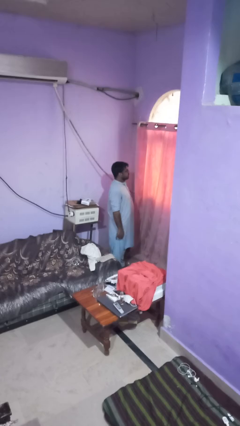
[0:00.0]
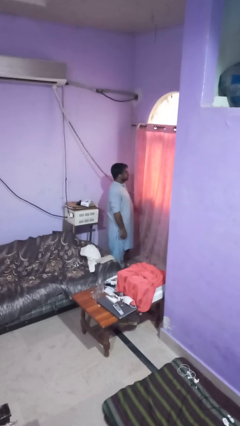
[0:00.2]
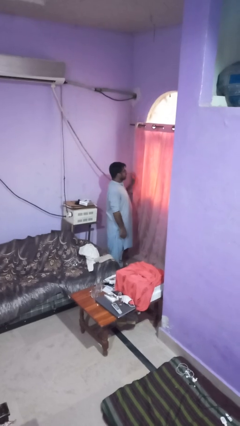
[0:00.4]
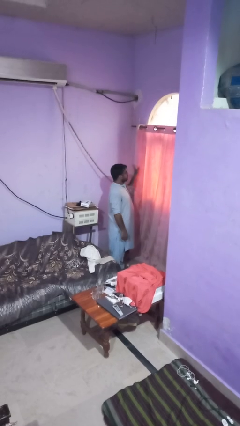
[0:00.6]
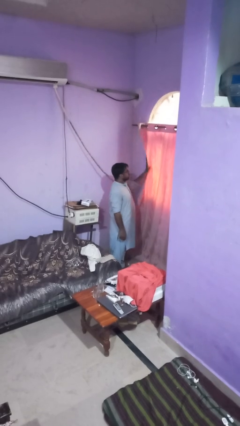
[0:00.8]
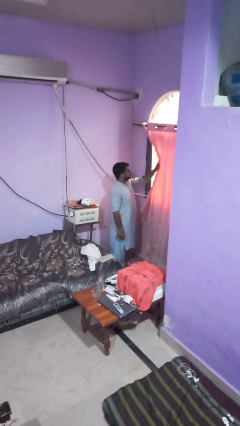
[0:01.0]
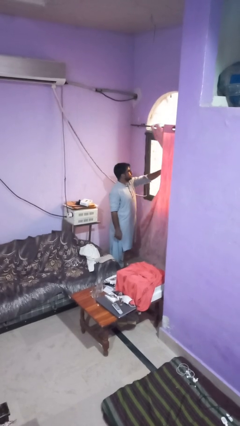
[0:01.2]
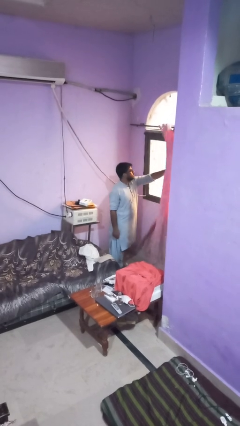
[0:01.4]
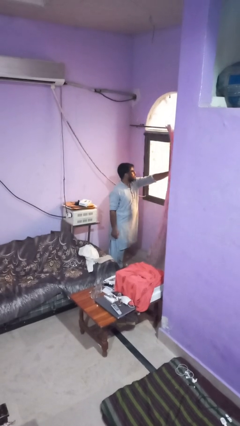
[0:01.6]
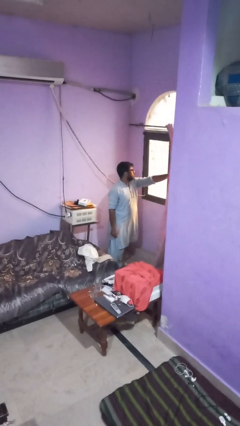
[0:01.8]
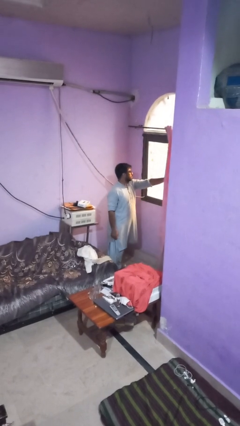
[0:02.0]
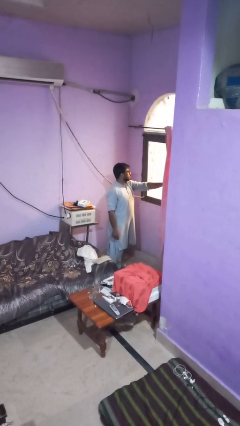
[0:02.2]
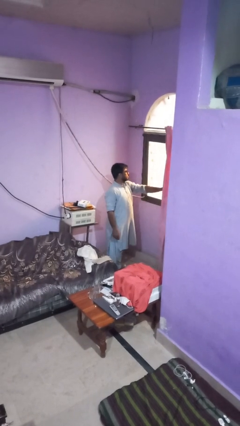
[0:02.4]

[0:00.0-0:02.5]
person opens curtains

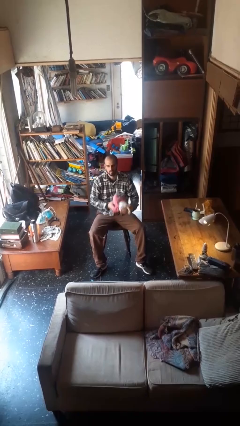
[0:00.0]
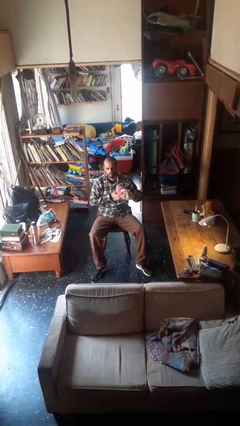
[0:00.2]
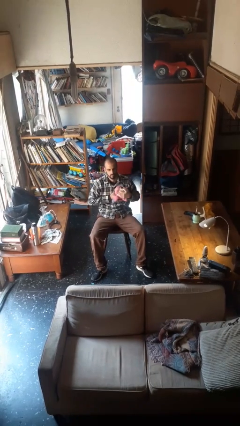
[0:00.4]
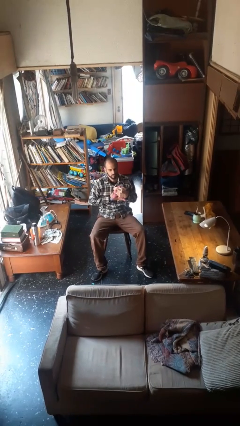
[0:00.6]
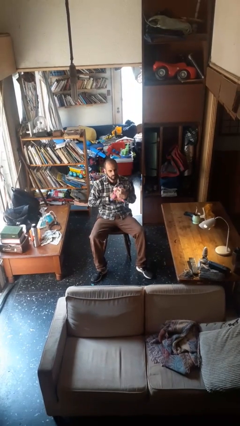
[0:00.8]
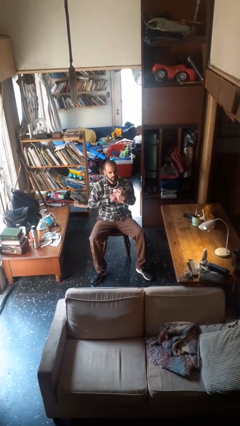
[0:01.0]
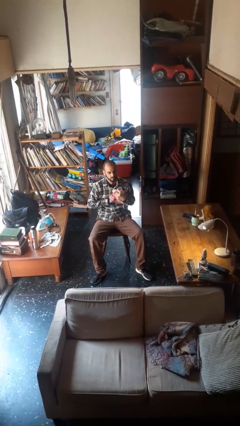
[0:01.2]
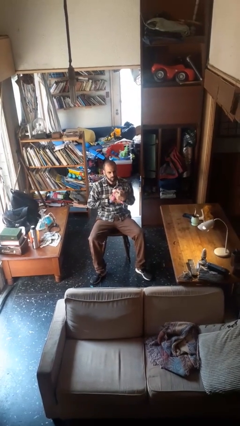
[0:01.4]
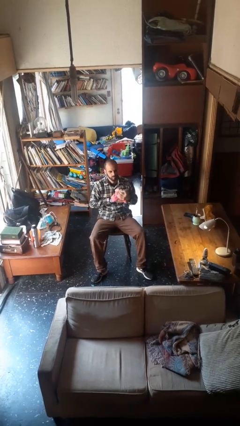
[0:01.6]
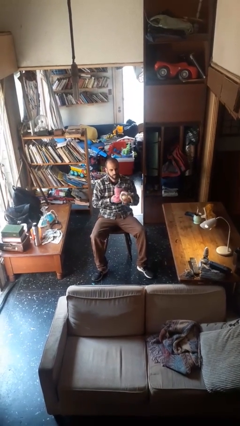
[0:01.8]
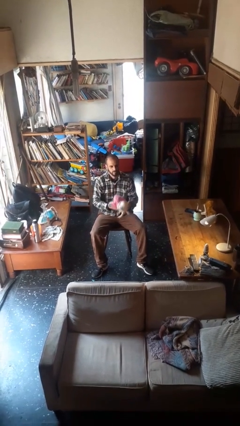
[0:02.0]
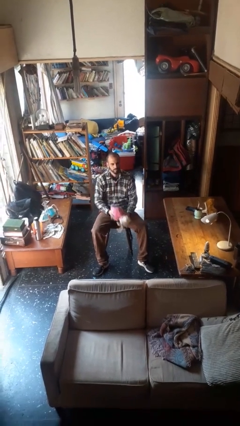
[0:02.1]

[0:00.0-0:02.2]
person squeezes object

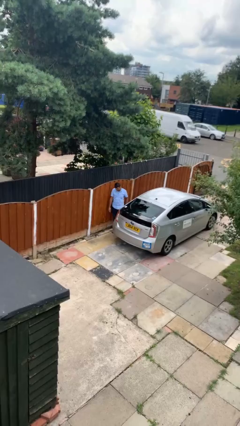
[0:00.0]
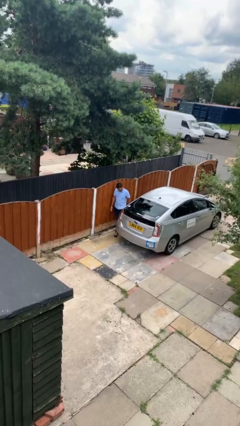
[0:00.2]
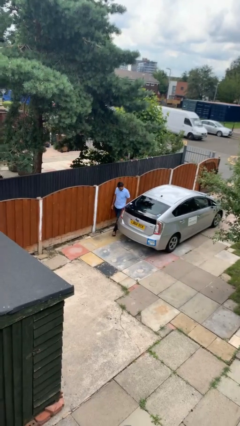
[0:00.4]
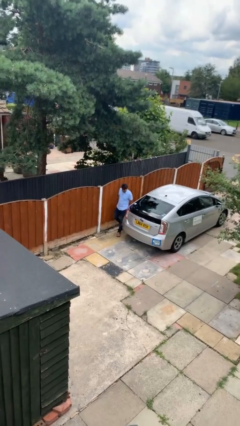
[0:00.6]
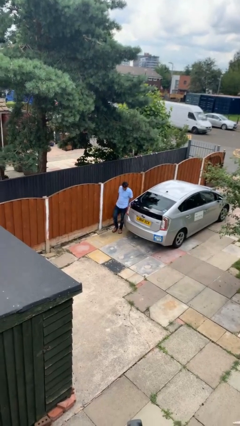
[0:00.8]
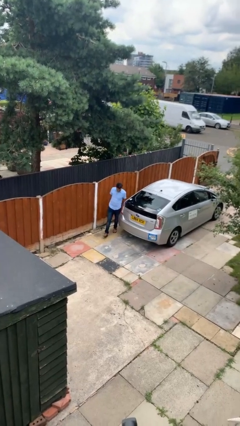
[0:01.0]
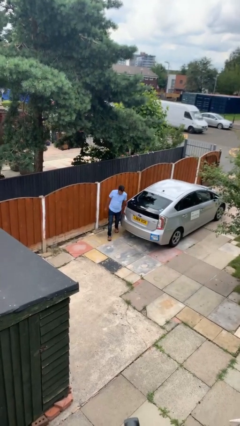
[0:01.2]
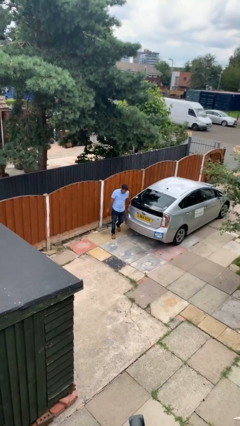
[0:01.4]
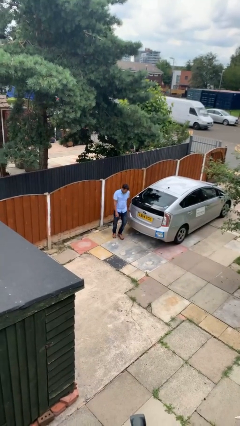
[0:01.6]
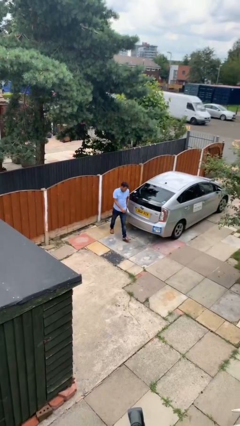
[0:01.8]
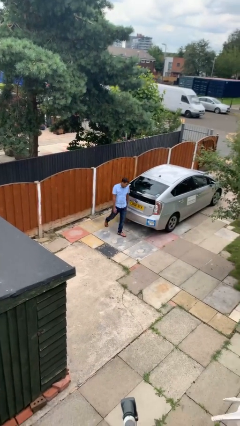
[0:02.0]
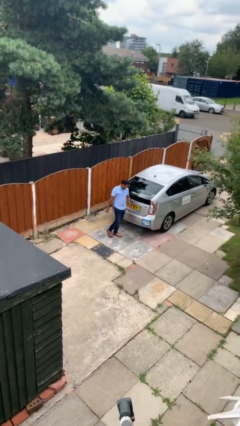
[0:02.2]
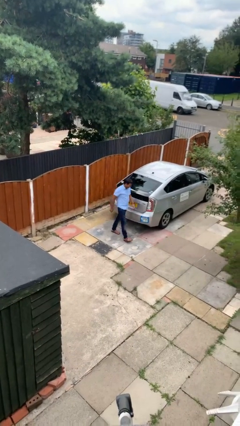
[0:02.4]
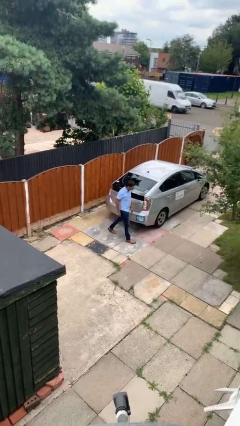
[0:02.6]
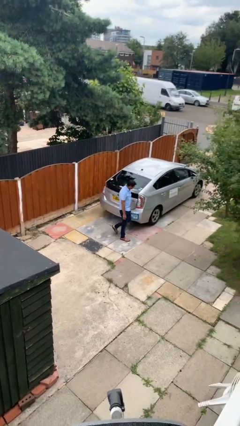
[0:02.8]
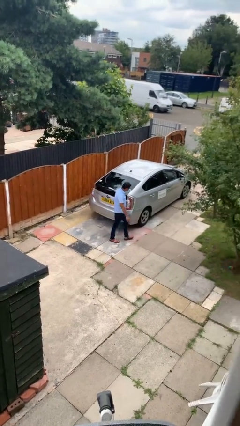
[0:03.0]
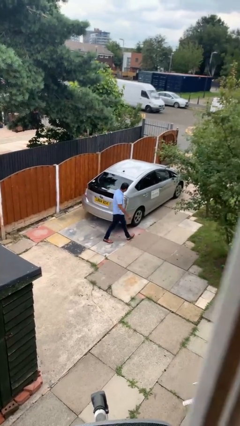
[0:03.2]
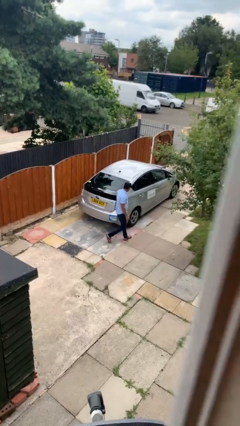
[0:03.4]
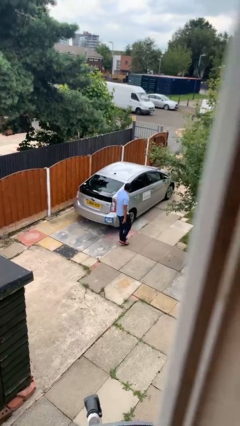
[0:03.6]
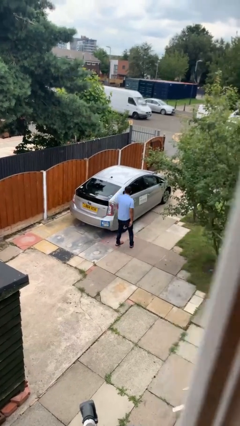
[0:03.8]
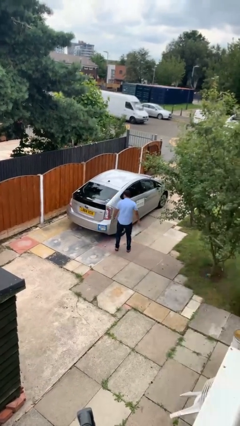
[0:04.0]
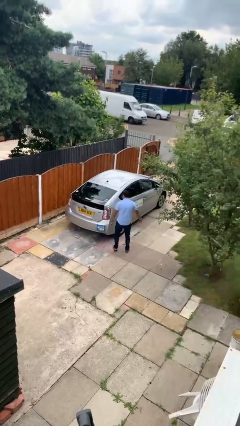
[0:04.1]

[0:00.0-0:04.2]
person walks around car

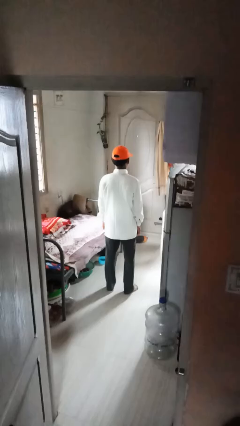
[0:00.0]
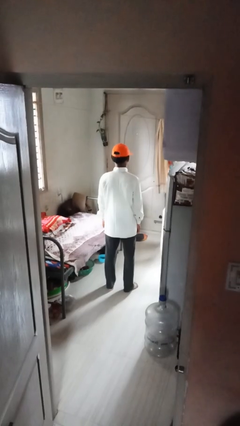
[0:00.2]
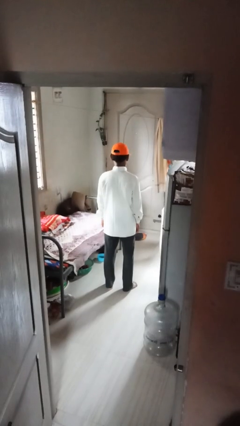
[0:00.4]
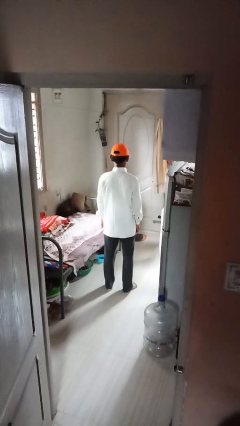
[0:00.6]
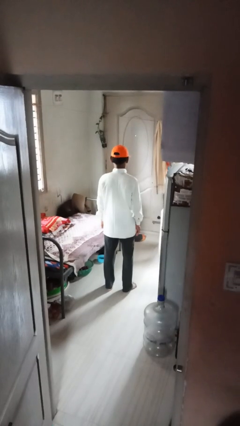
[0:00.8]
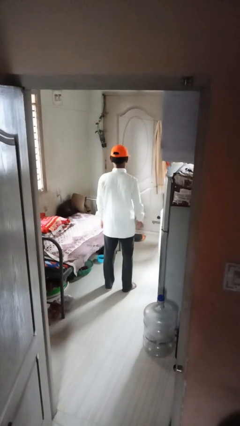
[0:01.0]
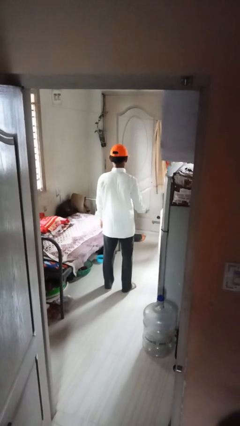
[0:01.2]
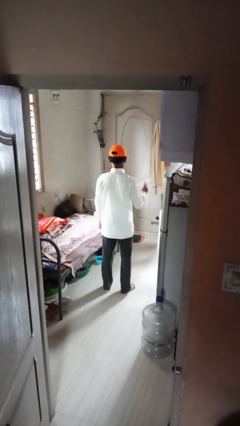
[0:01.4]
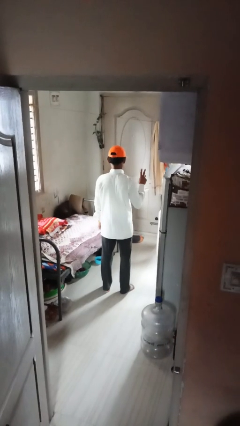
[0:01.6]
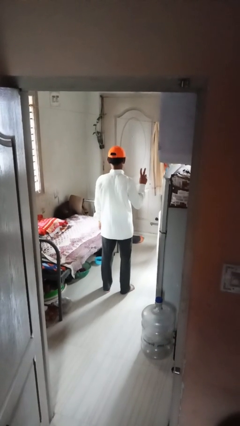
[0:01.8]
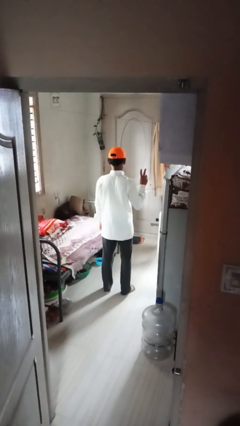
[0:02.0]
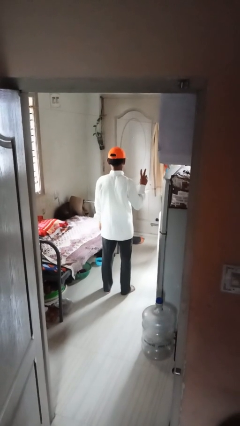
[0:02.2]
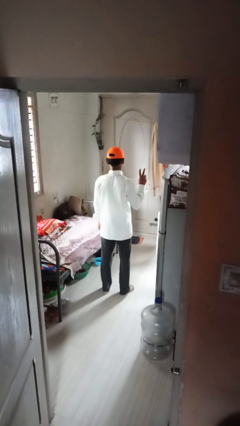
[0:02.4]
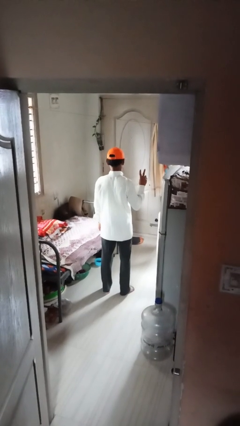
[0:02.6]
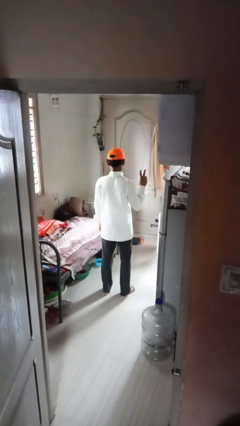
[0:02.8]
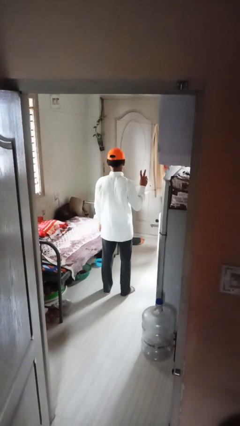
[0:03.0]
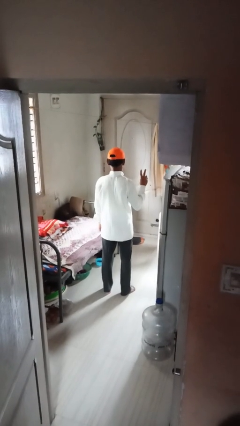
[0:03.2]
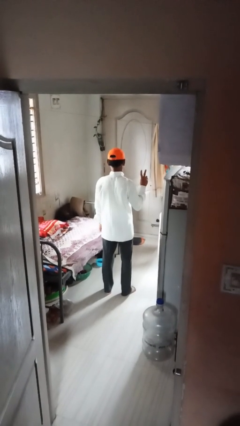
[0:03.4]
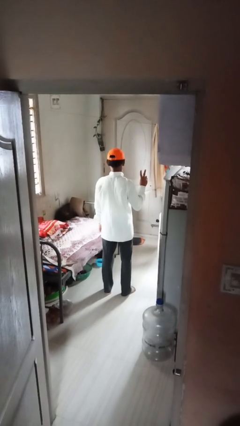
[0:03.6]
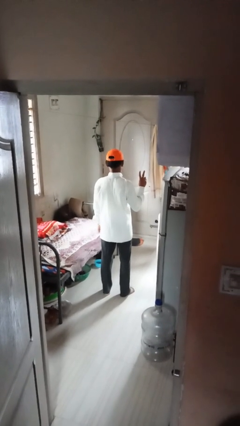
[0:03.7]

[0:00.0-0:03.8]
person gestures peace

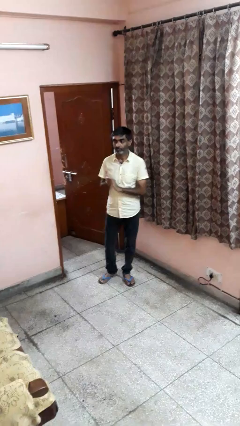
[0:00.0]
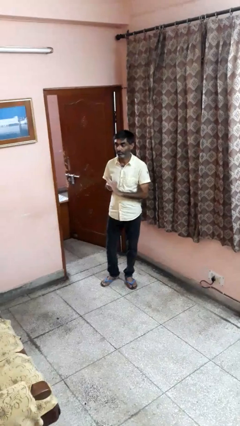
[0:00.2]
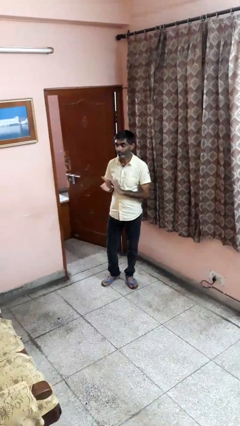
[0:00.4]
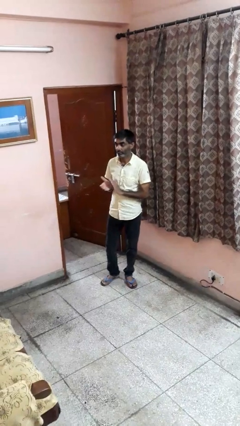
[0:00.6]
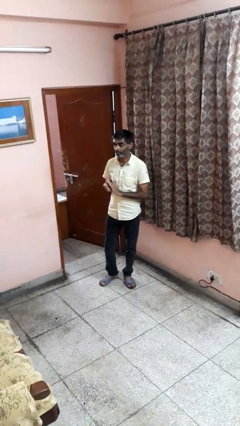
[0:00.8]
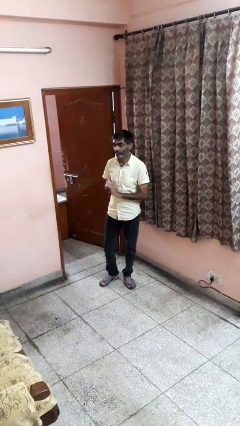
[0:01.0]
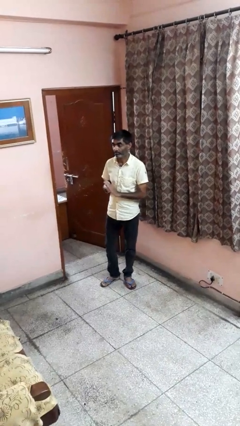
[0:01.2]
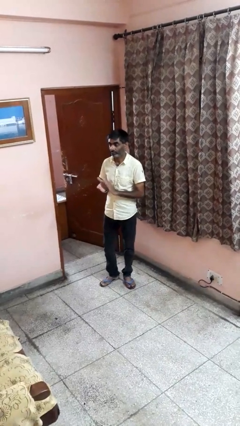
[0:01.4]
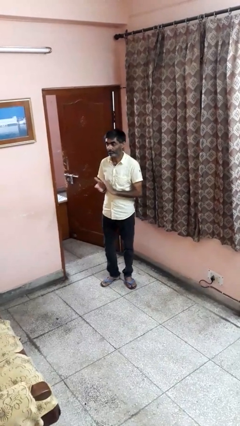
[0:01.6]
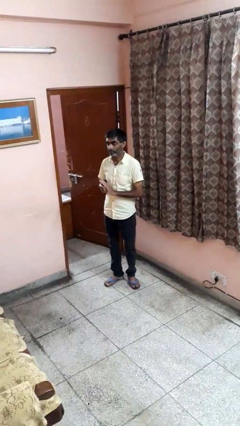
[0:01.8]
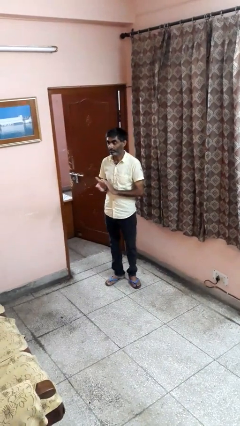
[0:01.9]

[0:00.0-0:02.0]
person claps hands

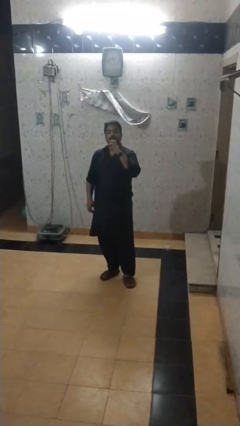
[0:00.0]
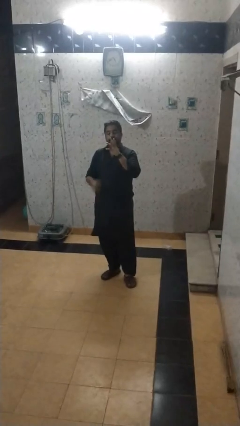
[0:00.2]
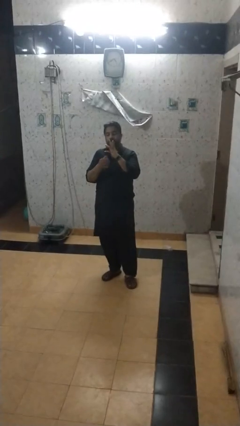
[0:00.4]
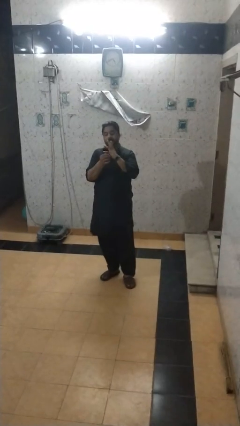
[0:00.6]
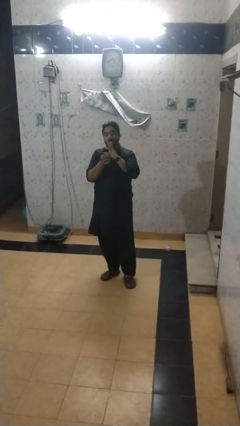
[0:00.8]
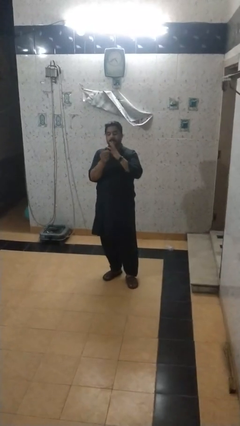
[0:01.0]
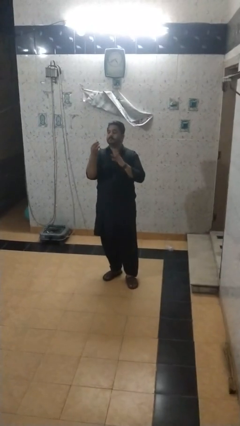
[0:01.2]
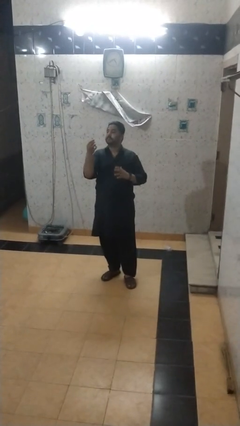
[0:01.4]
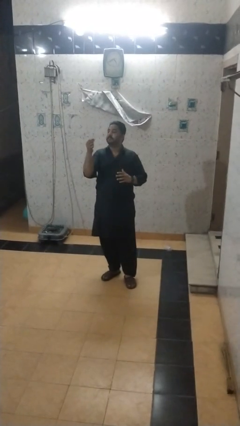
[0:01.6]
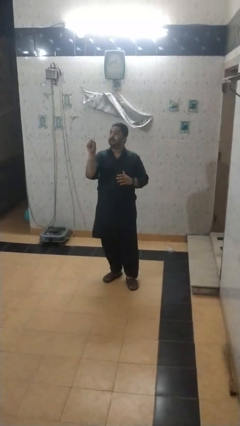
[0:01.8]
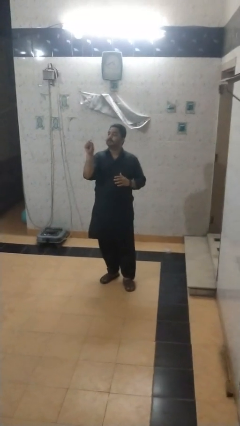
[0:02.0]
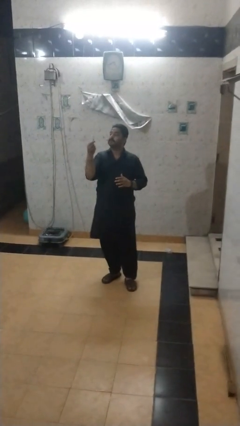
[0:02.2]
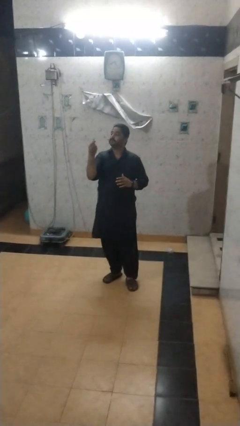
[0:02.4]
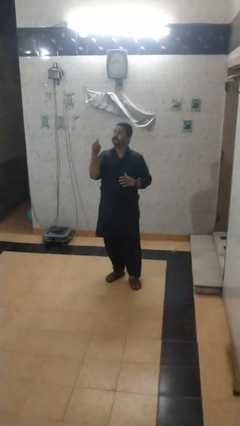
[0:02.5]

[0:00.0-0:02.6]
person takes off ring

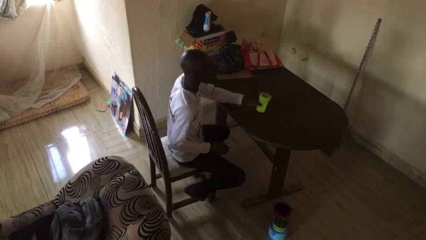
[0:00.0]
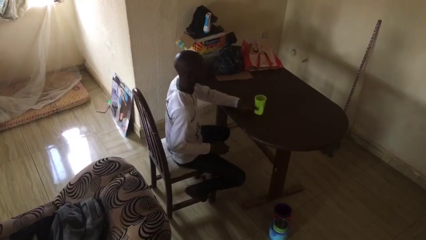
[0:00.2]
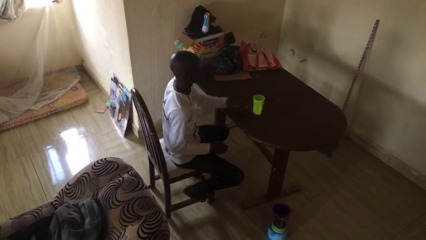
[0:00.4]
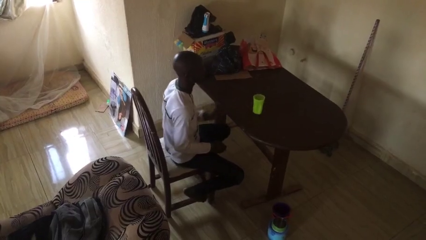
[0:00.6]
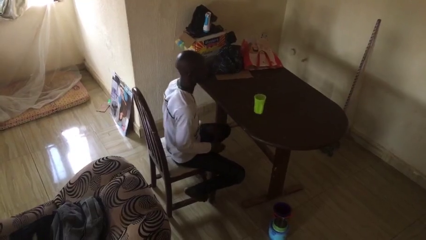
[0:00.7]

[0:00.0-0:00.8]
person sets upright glass
